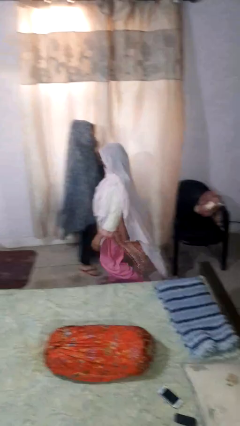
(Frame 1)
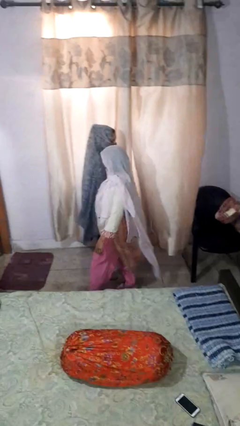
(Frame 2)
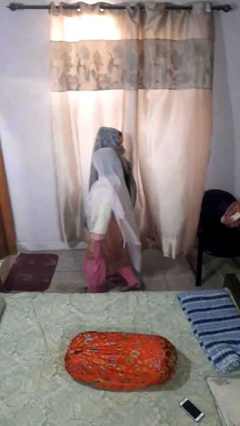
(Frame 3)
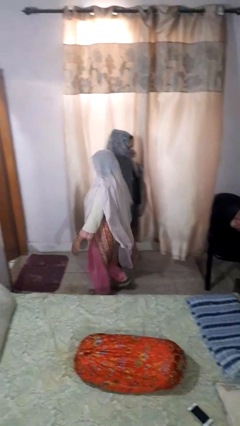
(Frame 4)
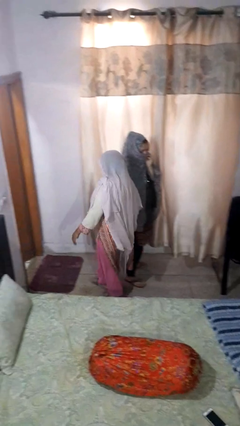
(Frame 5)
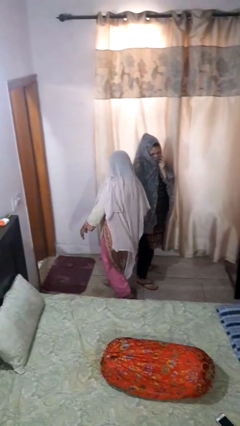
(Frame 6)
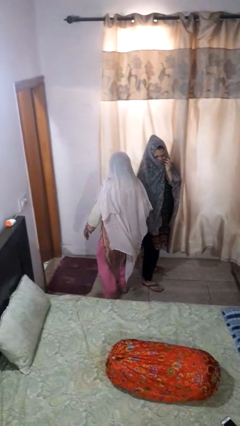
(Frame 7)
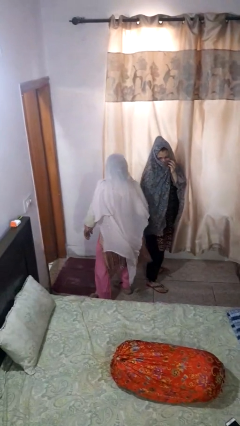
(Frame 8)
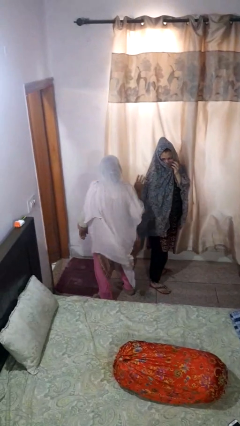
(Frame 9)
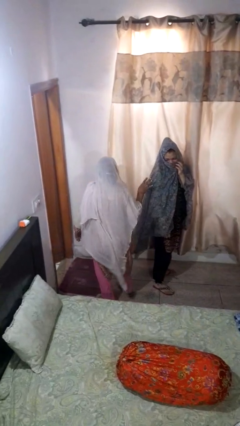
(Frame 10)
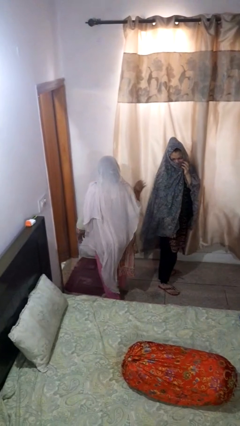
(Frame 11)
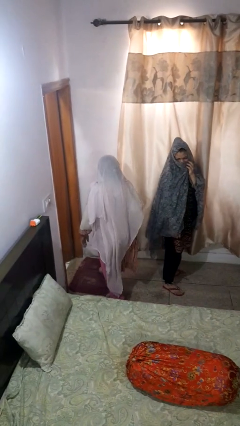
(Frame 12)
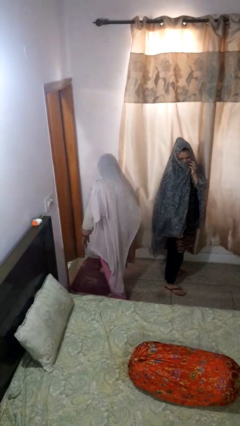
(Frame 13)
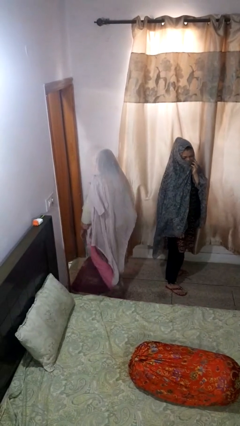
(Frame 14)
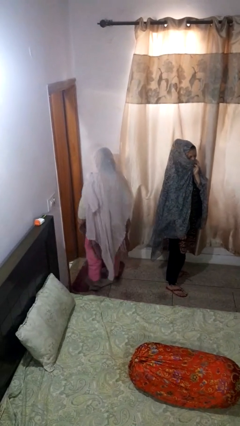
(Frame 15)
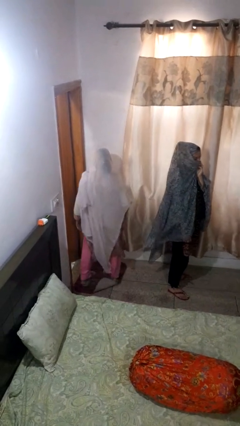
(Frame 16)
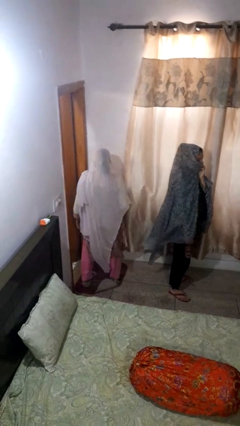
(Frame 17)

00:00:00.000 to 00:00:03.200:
person bumps into person

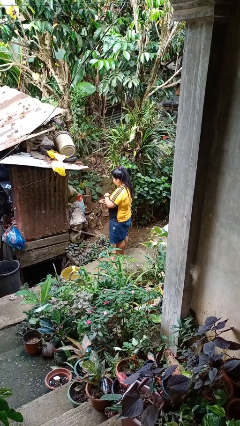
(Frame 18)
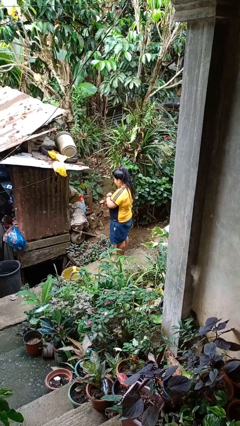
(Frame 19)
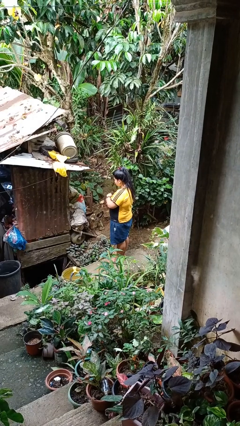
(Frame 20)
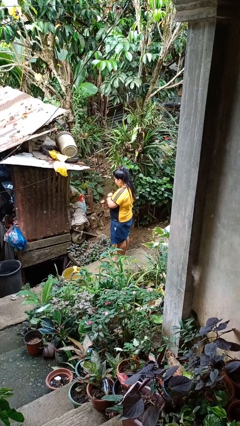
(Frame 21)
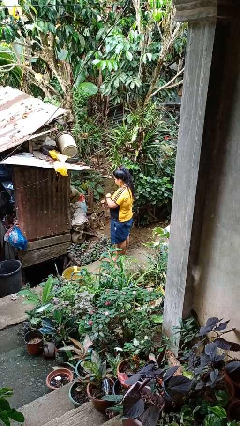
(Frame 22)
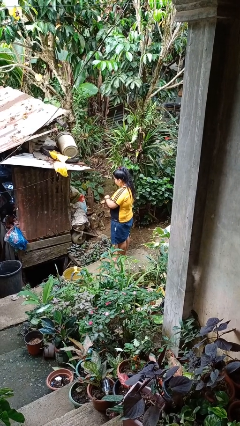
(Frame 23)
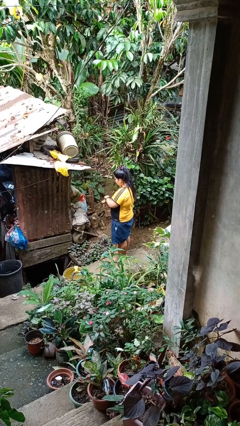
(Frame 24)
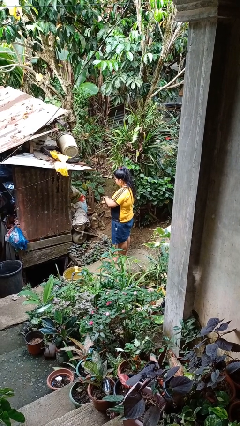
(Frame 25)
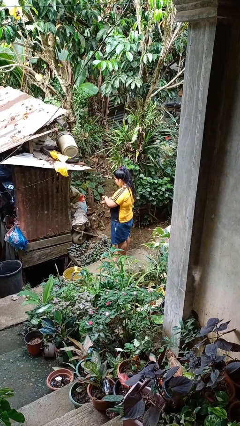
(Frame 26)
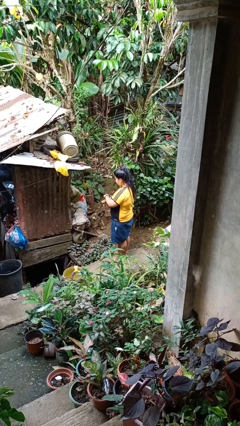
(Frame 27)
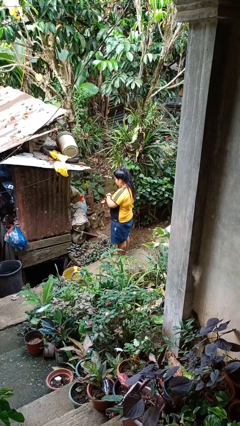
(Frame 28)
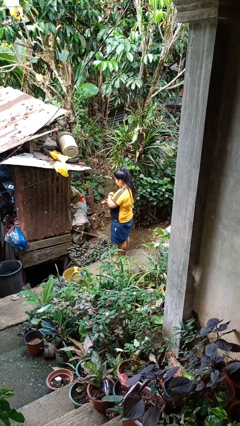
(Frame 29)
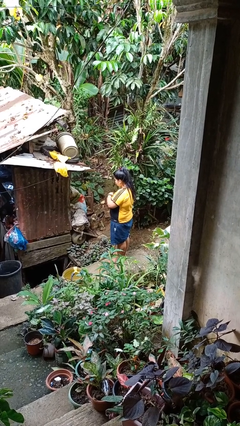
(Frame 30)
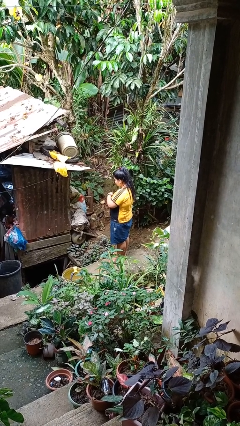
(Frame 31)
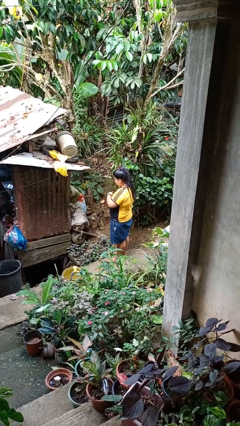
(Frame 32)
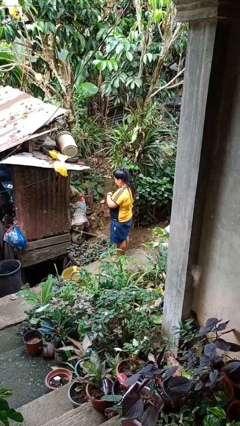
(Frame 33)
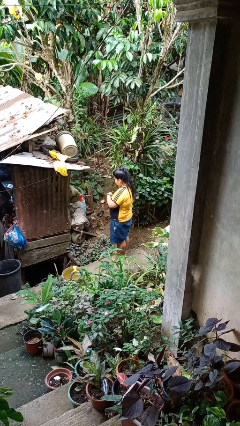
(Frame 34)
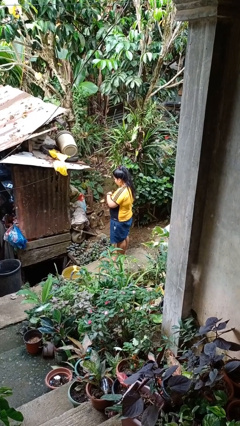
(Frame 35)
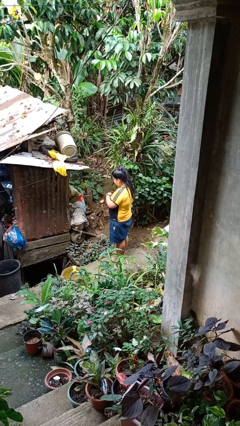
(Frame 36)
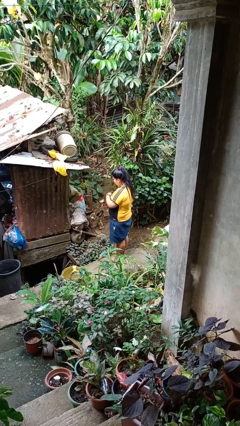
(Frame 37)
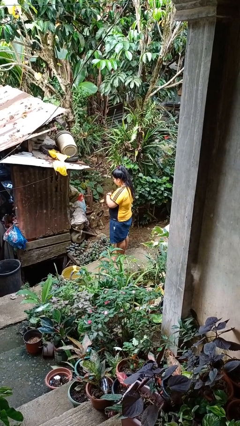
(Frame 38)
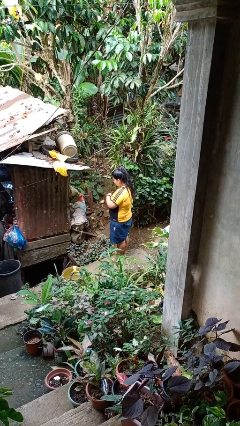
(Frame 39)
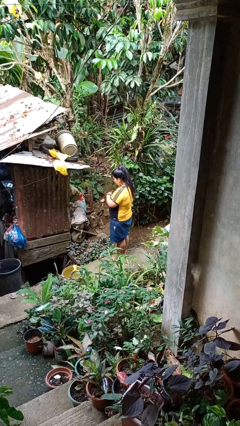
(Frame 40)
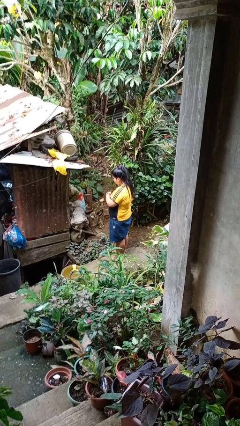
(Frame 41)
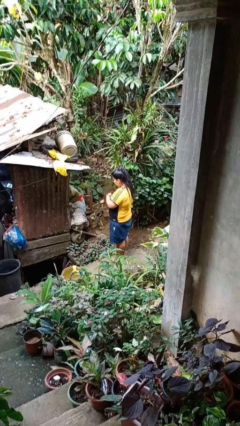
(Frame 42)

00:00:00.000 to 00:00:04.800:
person puts on wristwatch

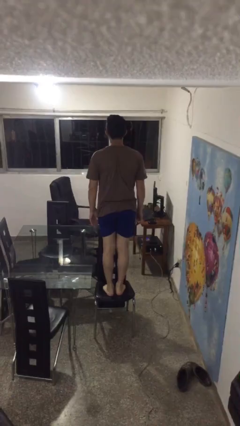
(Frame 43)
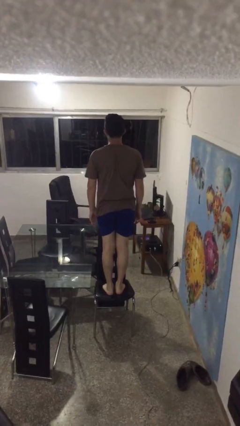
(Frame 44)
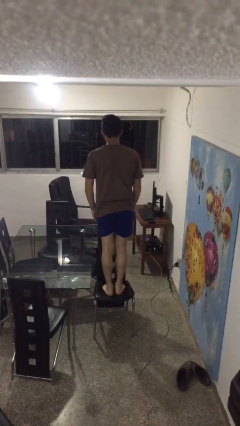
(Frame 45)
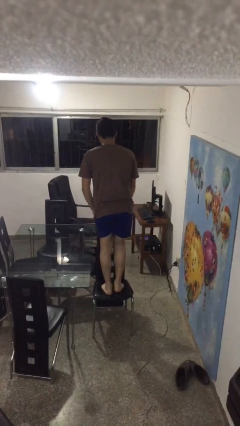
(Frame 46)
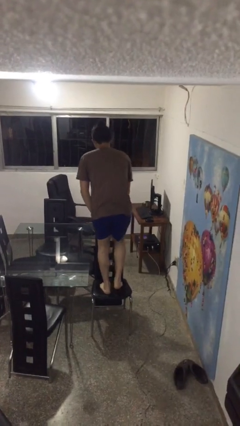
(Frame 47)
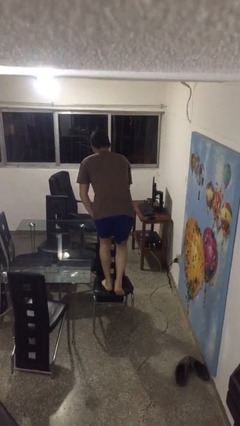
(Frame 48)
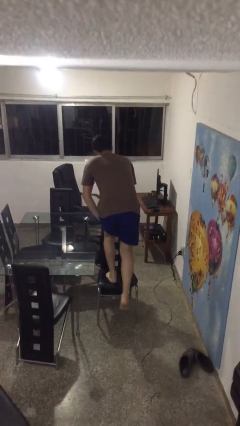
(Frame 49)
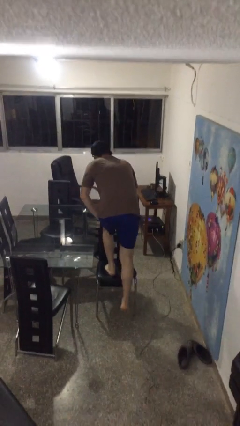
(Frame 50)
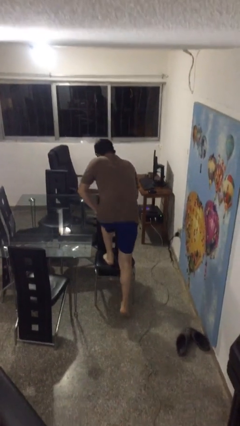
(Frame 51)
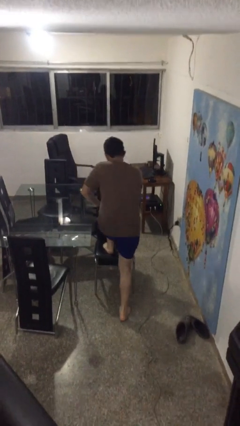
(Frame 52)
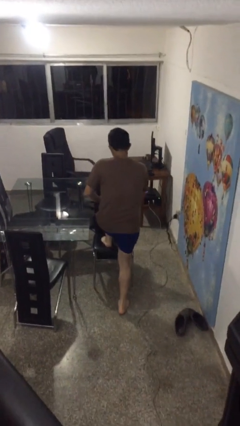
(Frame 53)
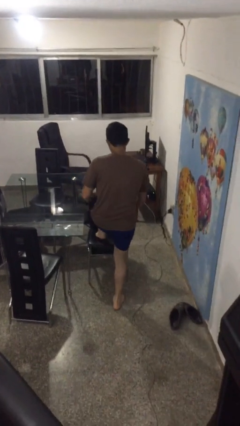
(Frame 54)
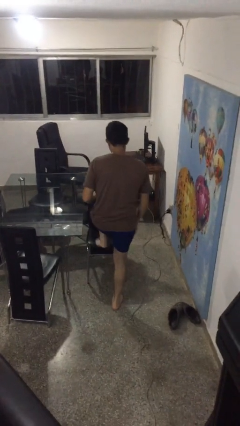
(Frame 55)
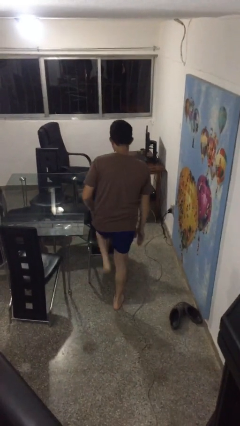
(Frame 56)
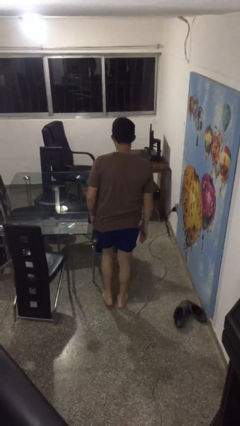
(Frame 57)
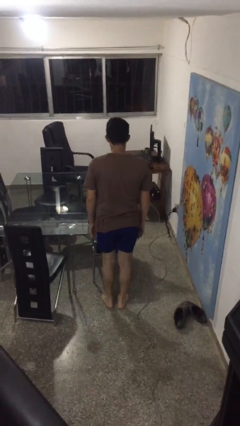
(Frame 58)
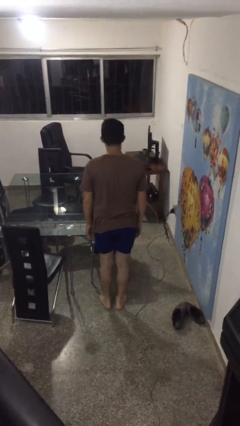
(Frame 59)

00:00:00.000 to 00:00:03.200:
person climbs off chair

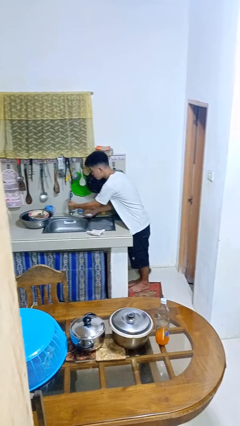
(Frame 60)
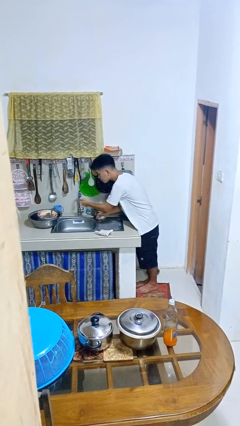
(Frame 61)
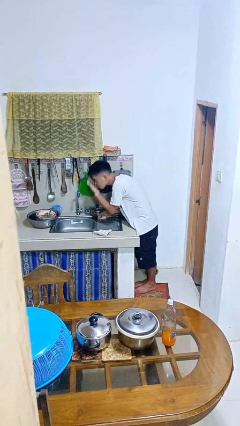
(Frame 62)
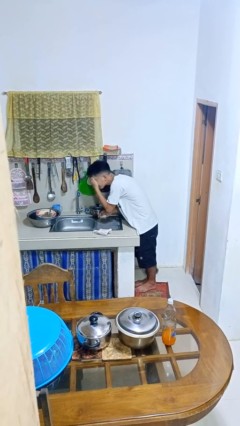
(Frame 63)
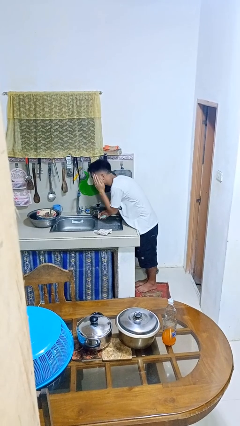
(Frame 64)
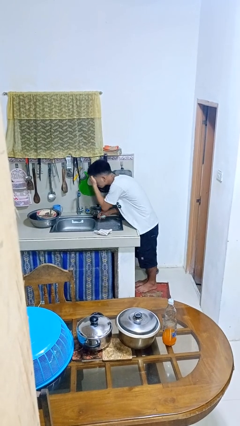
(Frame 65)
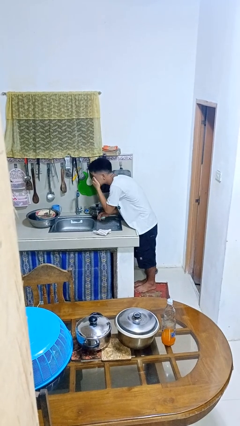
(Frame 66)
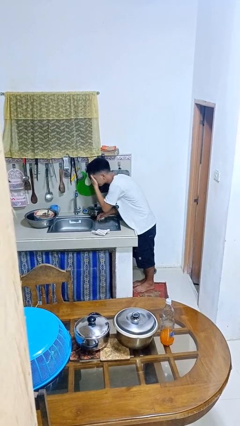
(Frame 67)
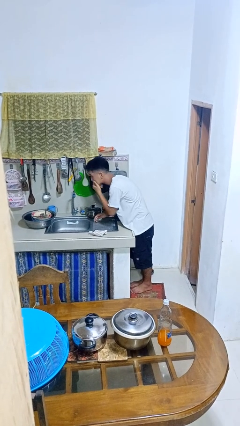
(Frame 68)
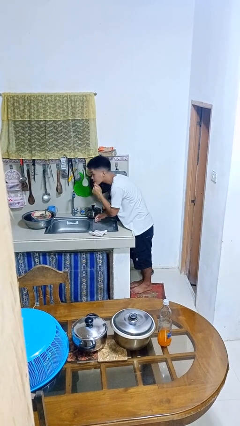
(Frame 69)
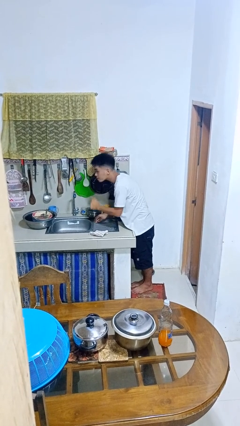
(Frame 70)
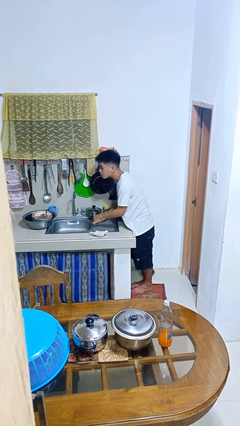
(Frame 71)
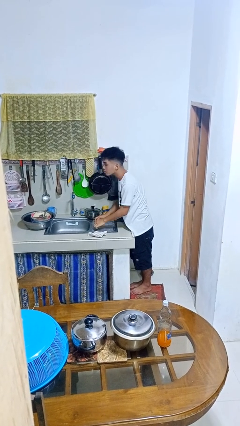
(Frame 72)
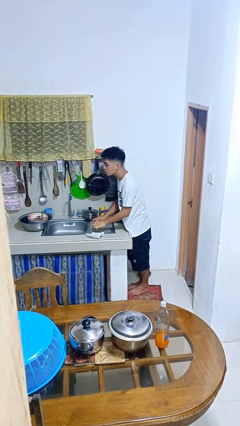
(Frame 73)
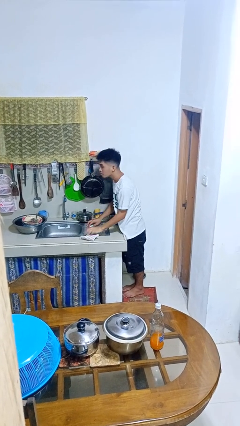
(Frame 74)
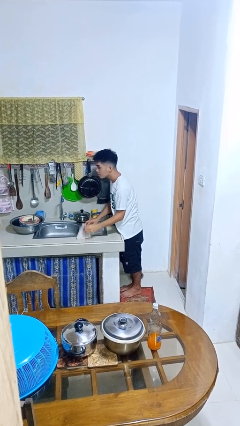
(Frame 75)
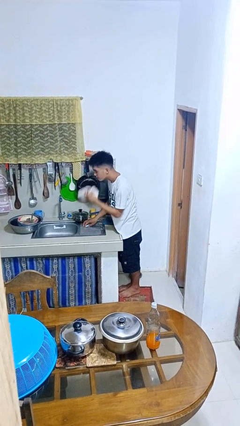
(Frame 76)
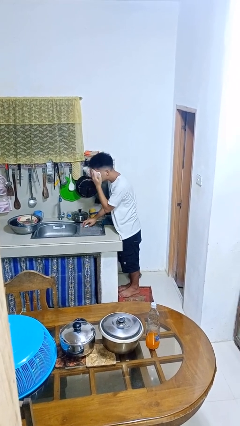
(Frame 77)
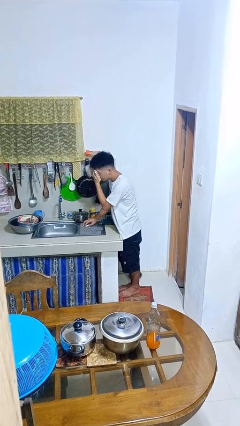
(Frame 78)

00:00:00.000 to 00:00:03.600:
person washes face

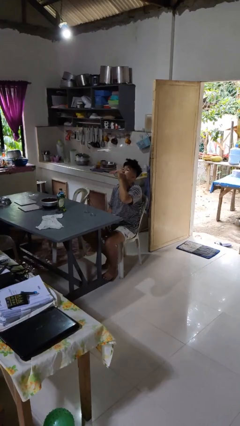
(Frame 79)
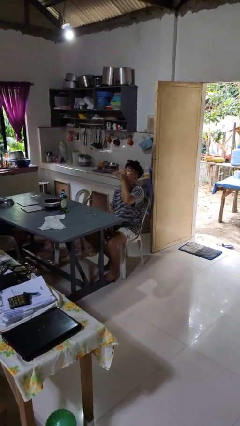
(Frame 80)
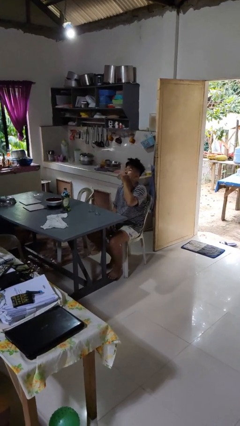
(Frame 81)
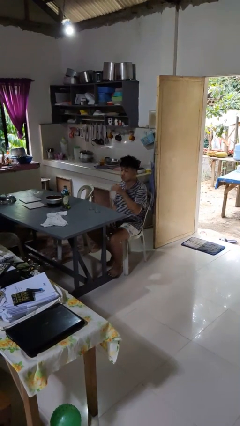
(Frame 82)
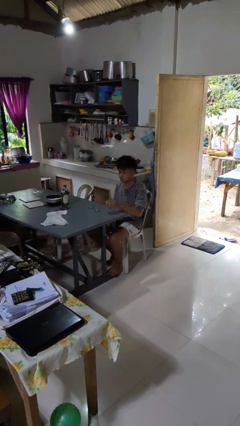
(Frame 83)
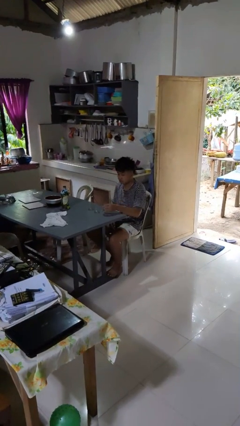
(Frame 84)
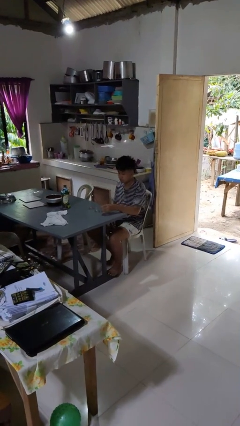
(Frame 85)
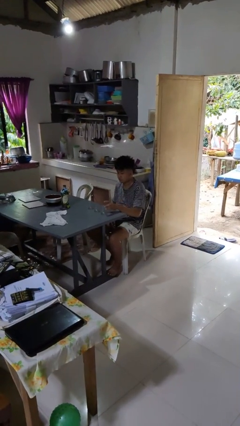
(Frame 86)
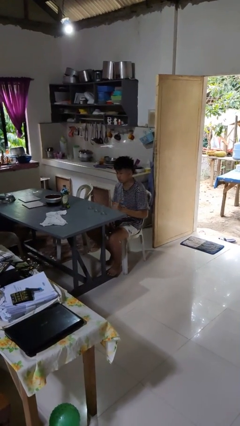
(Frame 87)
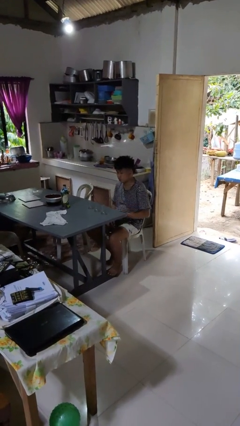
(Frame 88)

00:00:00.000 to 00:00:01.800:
person puts down object on table

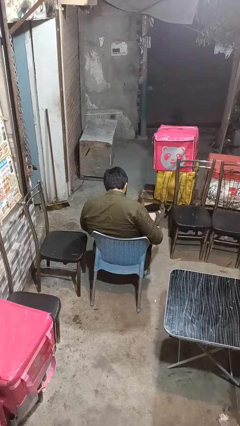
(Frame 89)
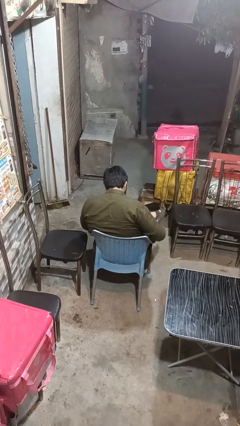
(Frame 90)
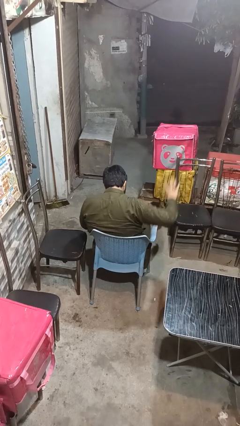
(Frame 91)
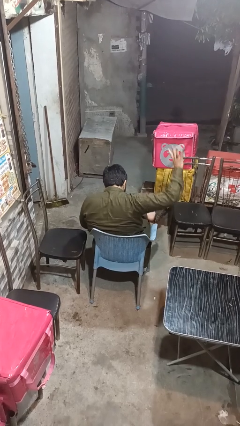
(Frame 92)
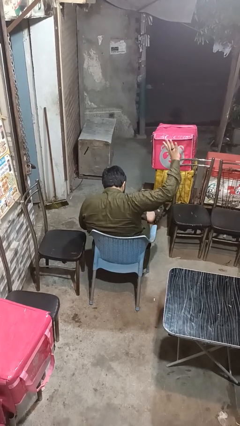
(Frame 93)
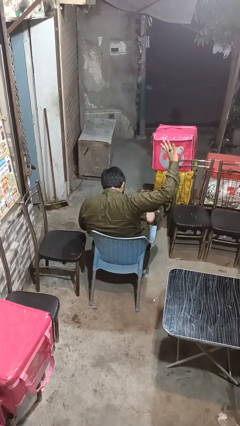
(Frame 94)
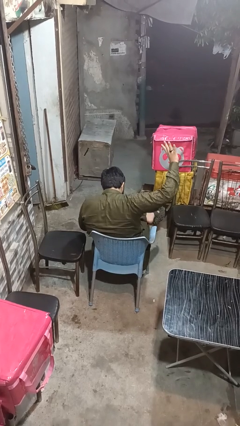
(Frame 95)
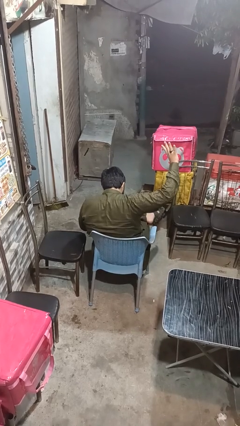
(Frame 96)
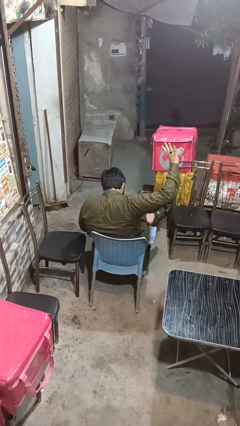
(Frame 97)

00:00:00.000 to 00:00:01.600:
person gestures number four
